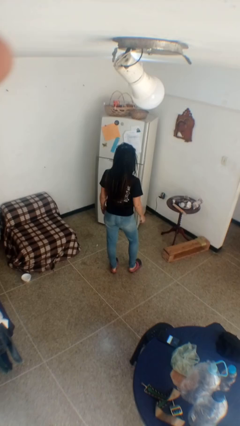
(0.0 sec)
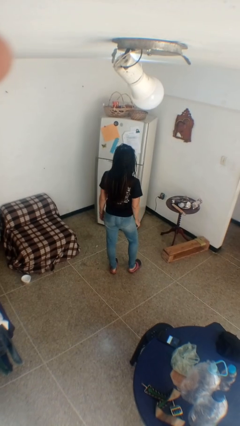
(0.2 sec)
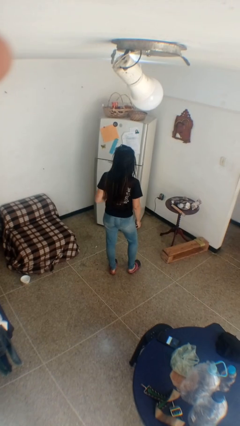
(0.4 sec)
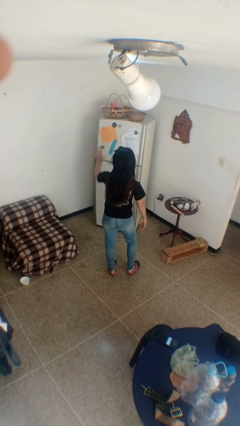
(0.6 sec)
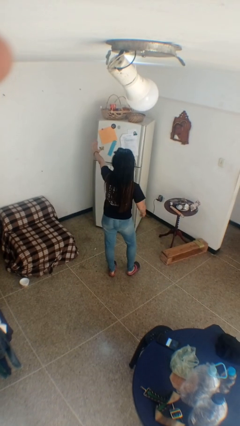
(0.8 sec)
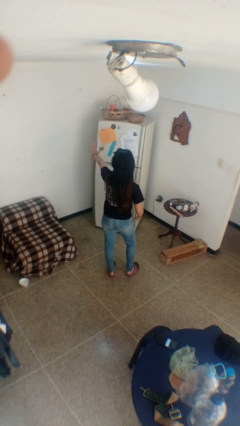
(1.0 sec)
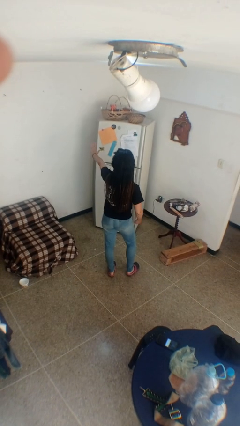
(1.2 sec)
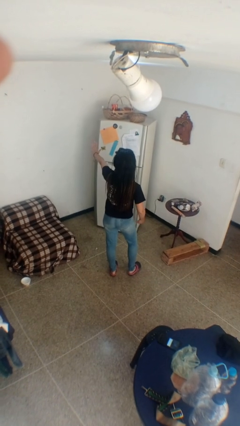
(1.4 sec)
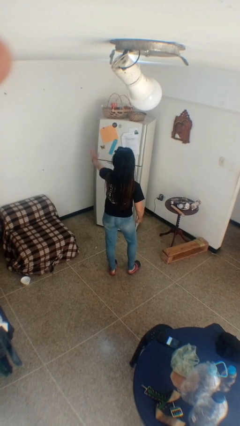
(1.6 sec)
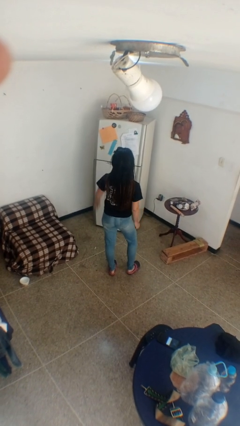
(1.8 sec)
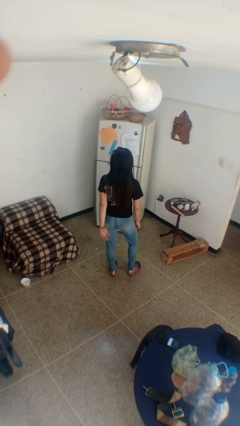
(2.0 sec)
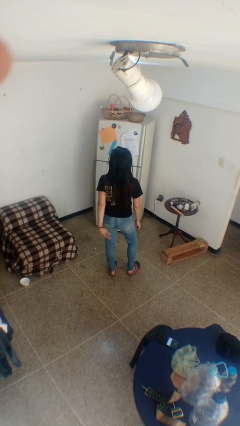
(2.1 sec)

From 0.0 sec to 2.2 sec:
person gestures stop

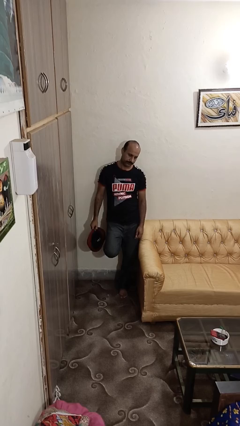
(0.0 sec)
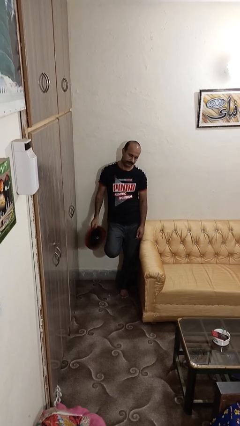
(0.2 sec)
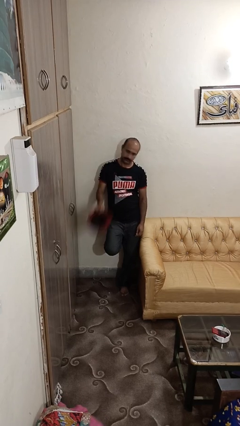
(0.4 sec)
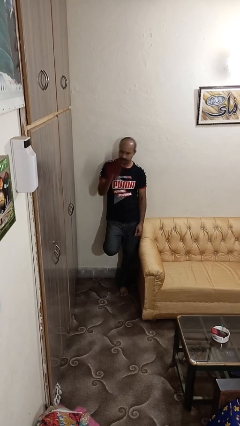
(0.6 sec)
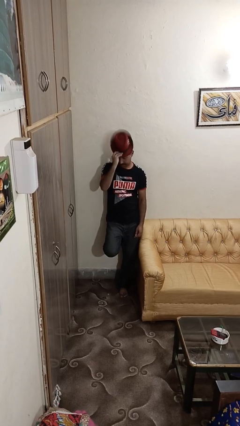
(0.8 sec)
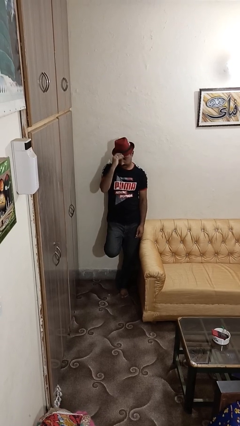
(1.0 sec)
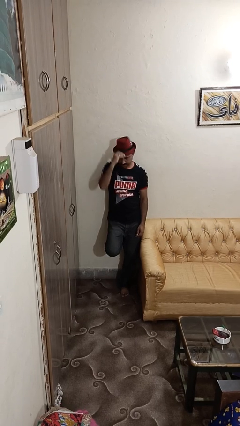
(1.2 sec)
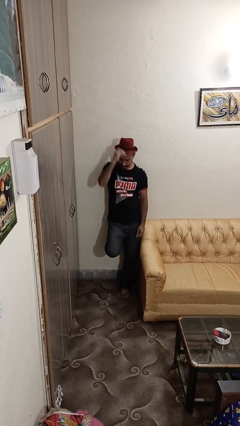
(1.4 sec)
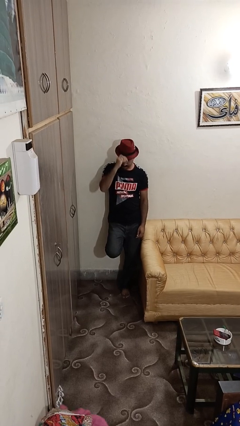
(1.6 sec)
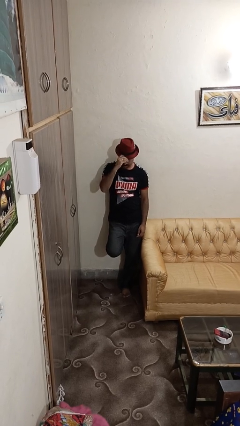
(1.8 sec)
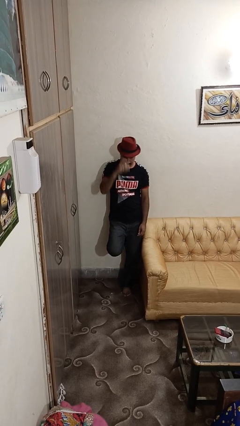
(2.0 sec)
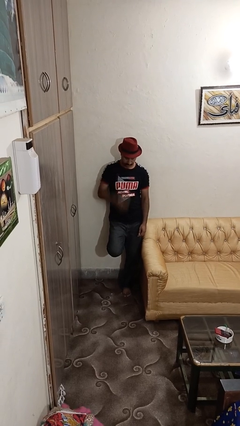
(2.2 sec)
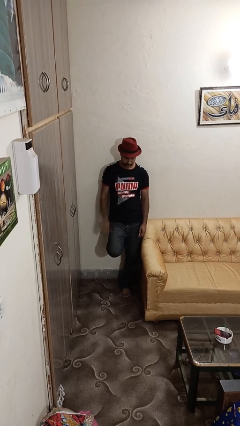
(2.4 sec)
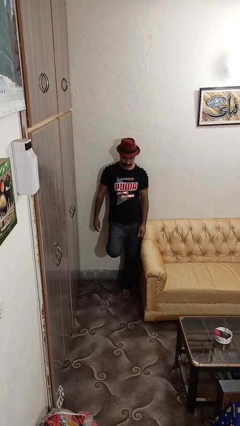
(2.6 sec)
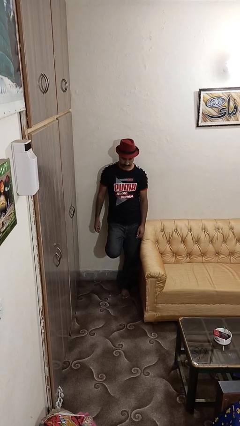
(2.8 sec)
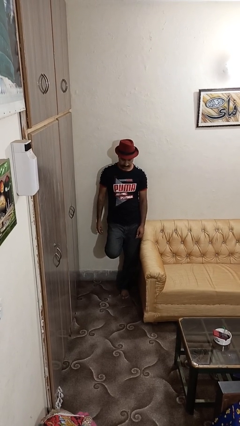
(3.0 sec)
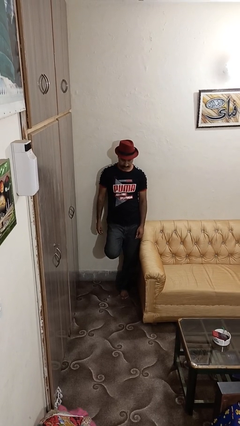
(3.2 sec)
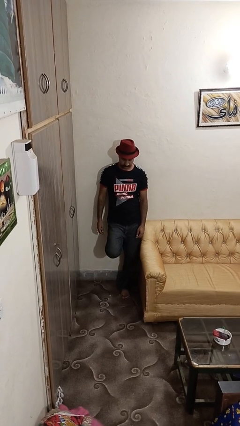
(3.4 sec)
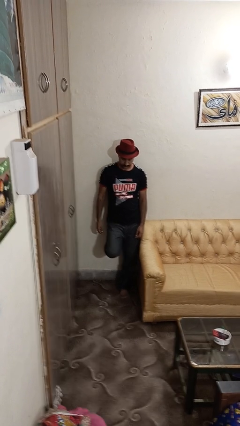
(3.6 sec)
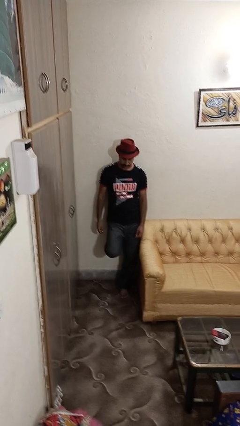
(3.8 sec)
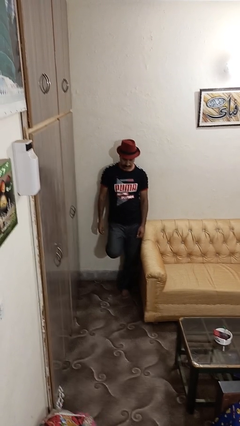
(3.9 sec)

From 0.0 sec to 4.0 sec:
person puts on hat

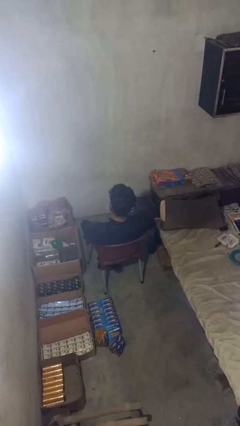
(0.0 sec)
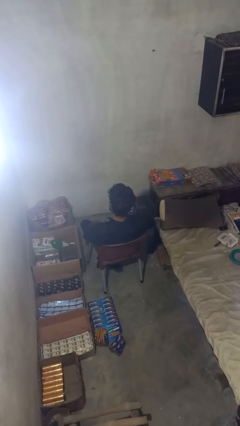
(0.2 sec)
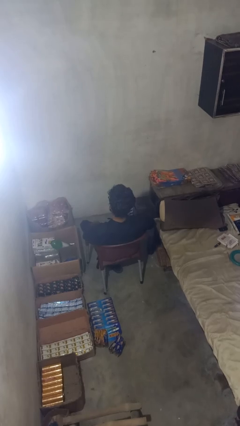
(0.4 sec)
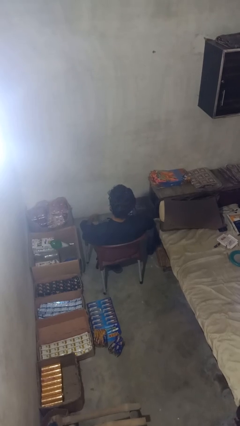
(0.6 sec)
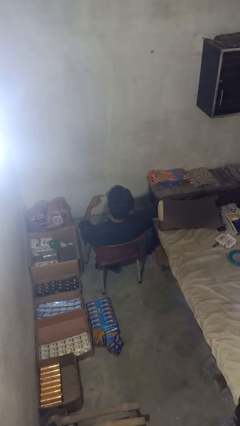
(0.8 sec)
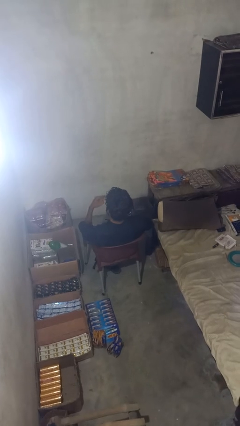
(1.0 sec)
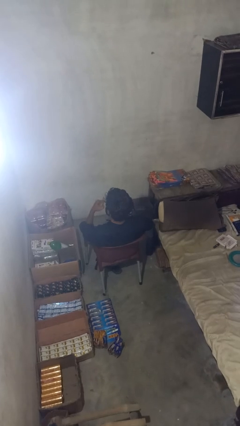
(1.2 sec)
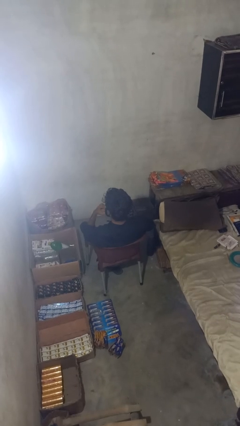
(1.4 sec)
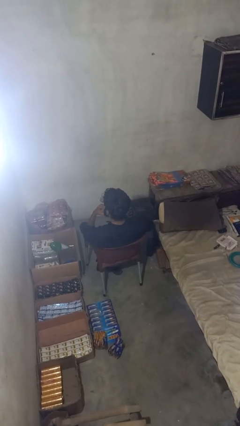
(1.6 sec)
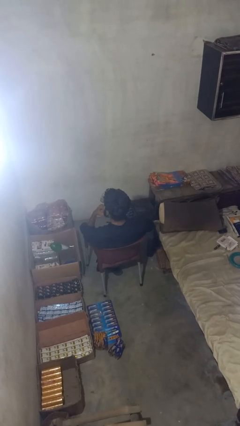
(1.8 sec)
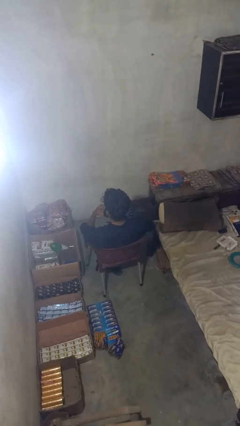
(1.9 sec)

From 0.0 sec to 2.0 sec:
person licks fingers

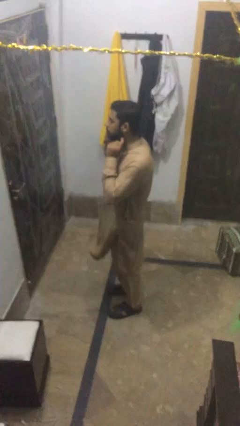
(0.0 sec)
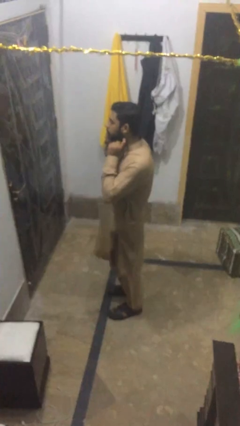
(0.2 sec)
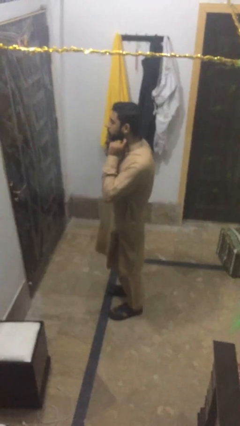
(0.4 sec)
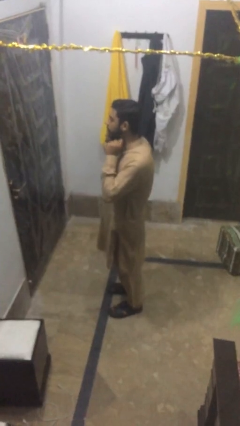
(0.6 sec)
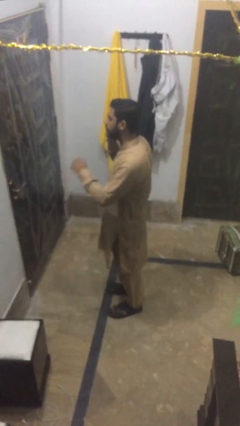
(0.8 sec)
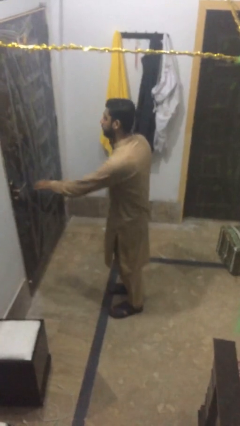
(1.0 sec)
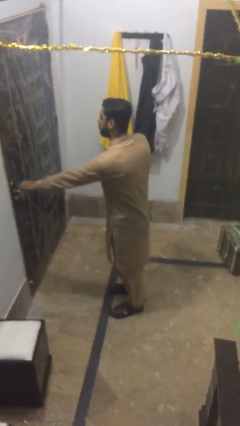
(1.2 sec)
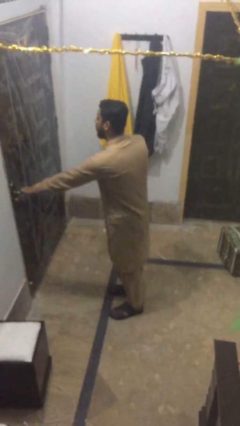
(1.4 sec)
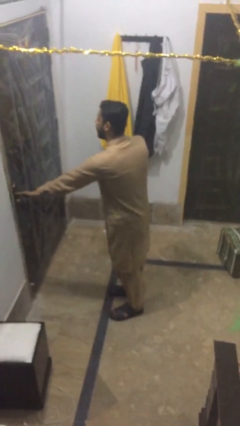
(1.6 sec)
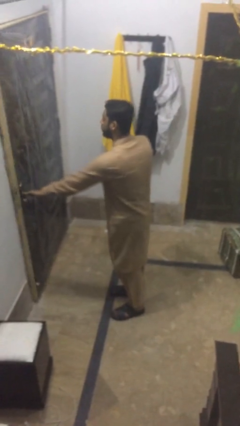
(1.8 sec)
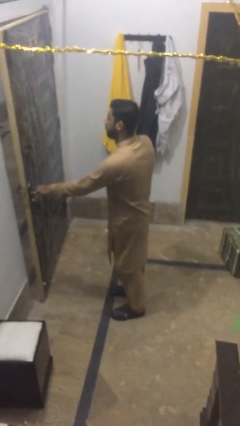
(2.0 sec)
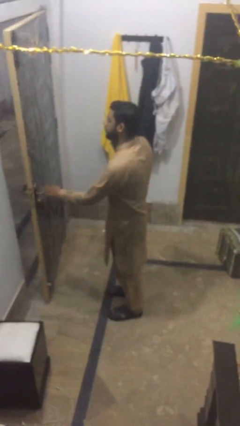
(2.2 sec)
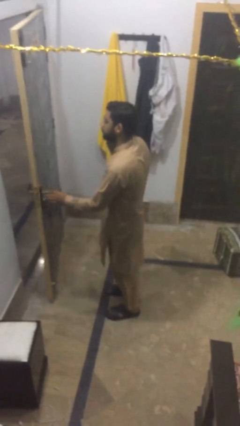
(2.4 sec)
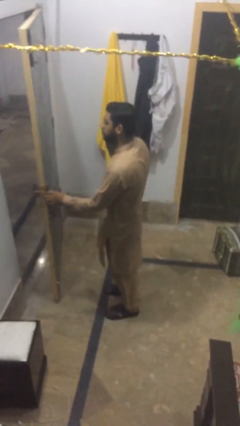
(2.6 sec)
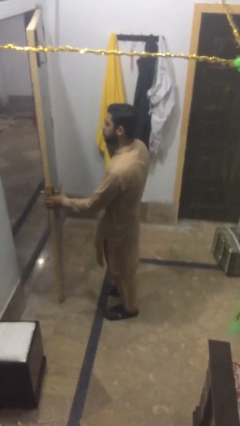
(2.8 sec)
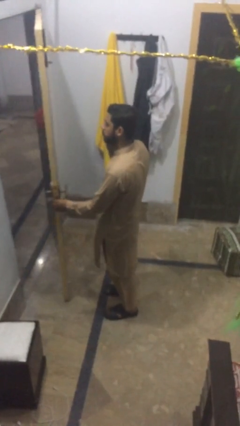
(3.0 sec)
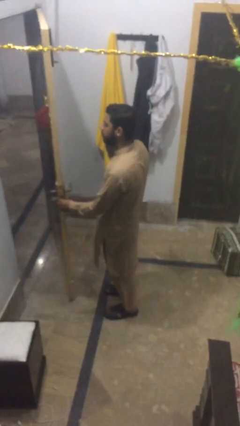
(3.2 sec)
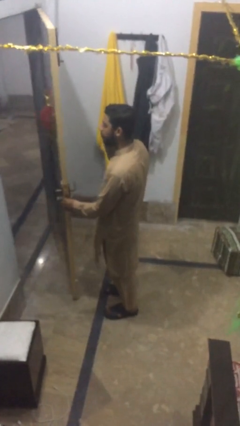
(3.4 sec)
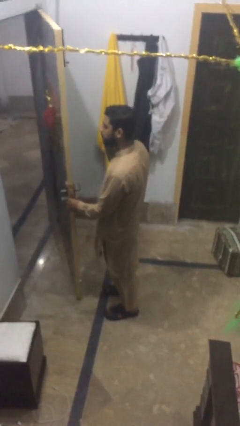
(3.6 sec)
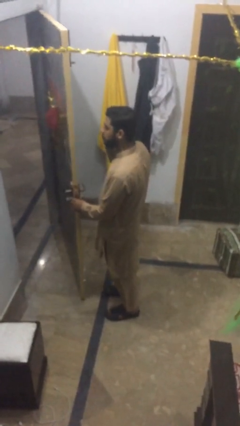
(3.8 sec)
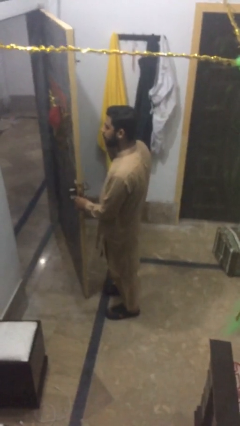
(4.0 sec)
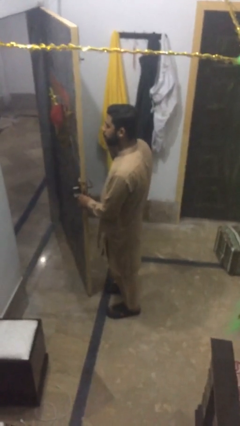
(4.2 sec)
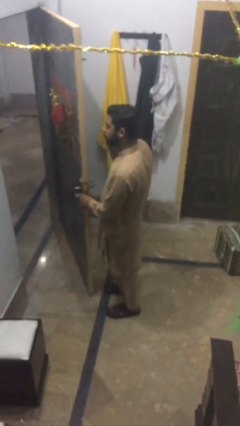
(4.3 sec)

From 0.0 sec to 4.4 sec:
person opens facility door

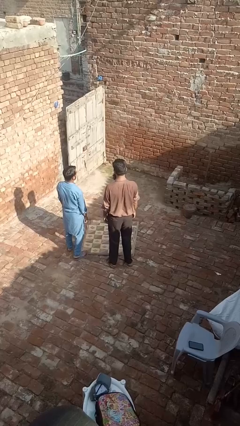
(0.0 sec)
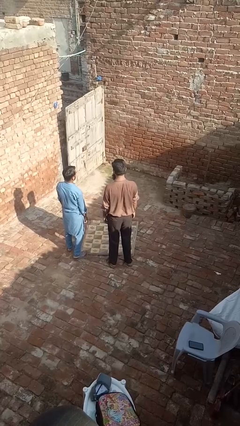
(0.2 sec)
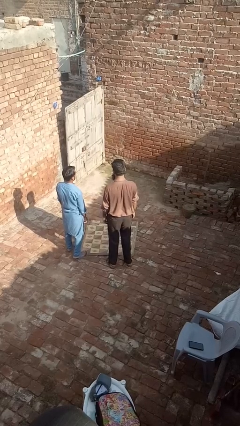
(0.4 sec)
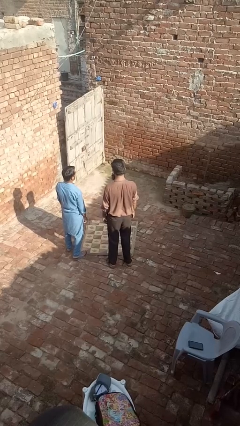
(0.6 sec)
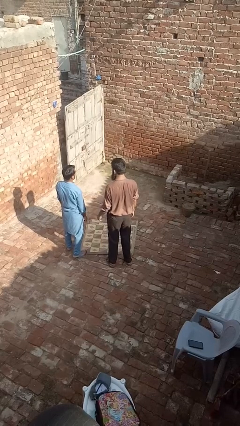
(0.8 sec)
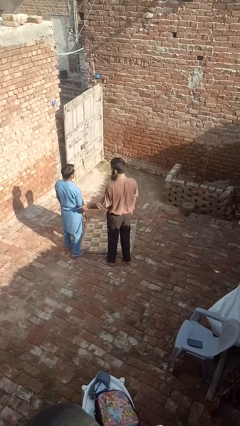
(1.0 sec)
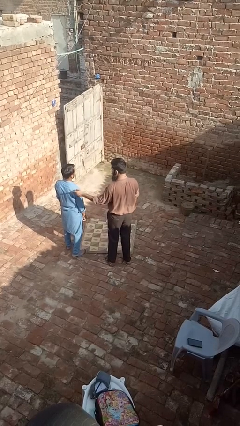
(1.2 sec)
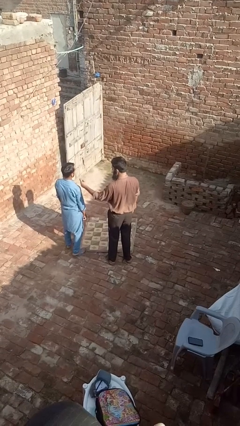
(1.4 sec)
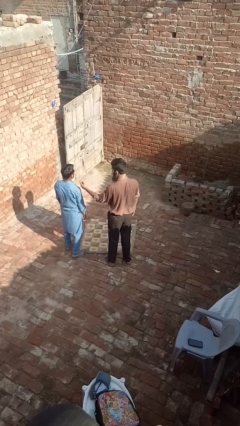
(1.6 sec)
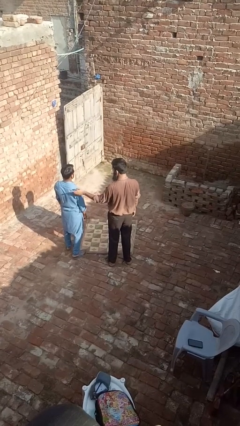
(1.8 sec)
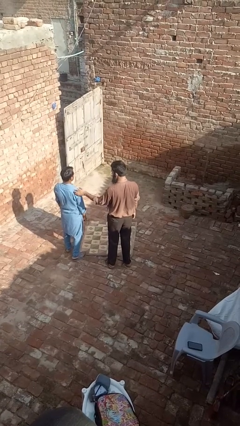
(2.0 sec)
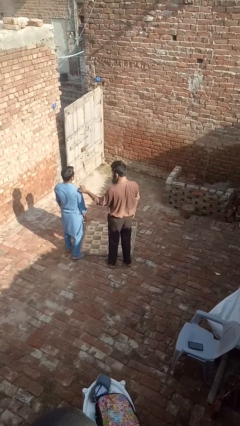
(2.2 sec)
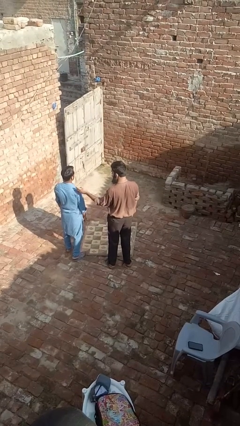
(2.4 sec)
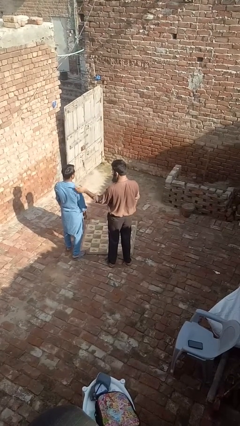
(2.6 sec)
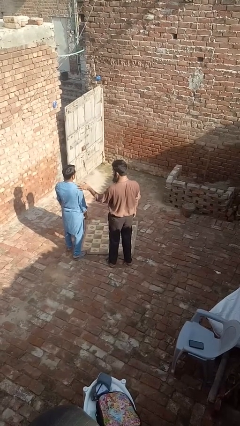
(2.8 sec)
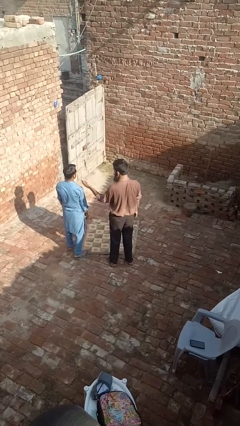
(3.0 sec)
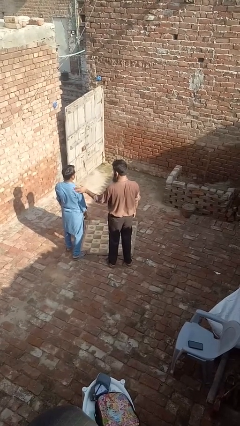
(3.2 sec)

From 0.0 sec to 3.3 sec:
person shoves person

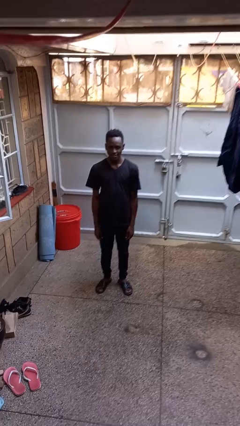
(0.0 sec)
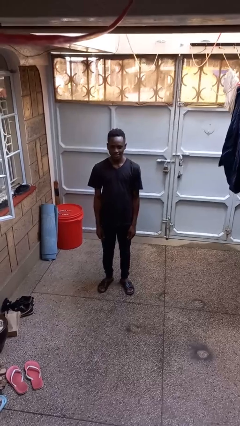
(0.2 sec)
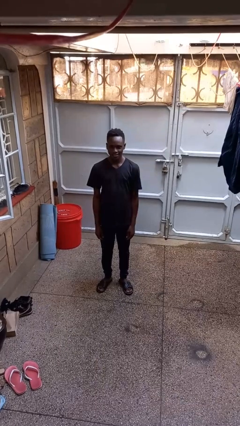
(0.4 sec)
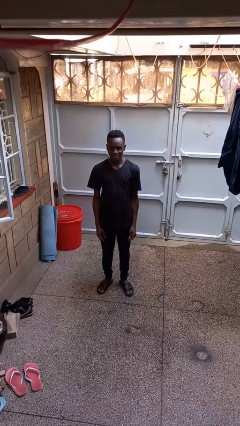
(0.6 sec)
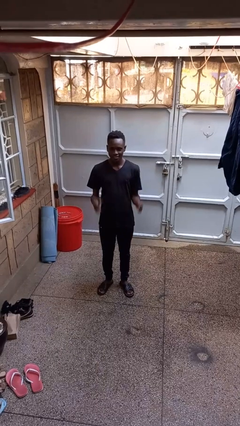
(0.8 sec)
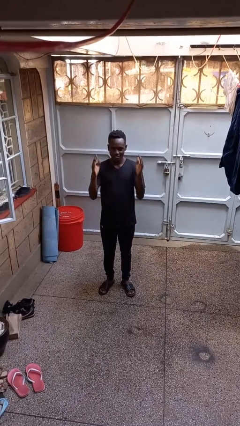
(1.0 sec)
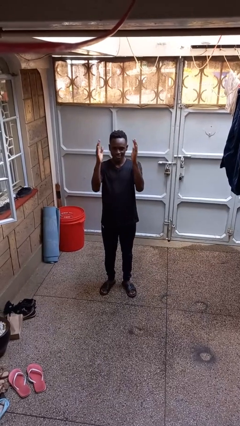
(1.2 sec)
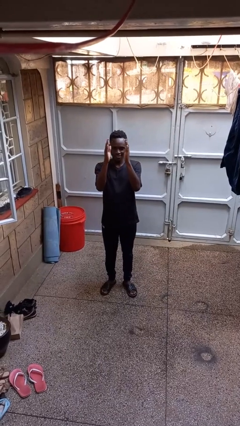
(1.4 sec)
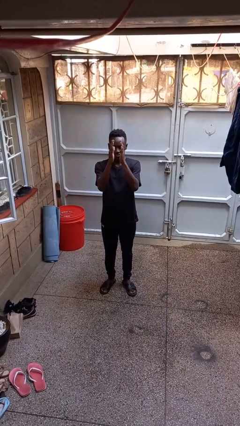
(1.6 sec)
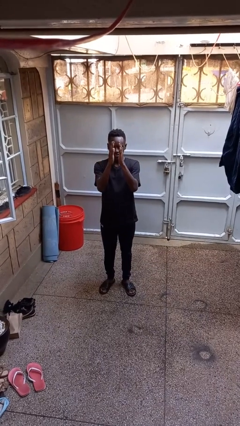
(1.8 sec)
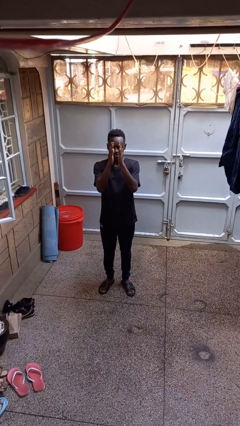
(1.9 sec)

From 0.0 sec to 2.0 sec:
person gestures zoom in
